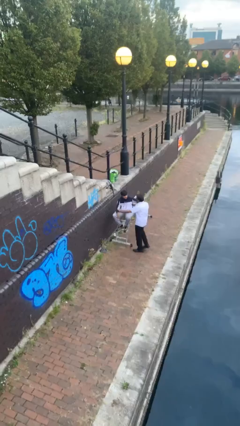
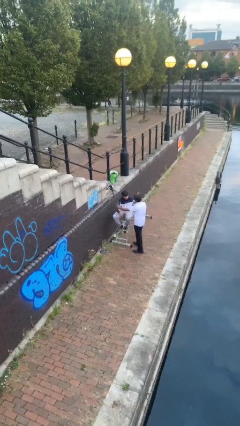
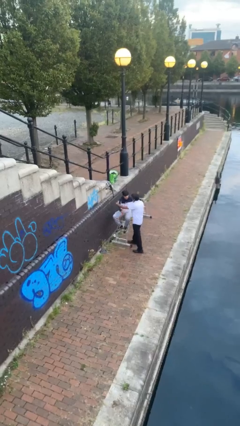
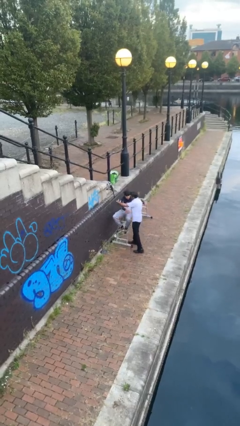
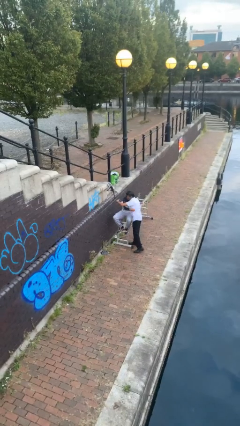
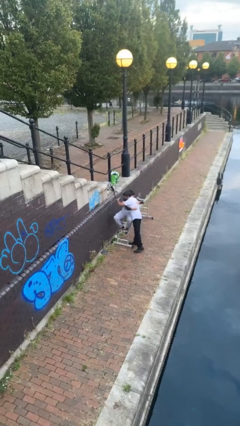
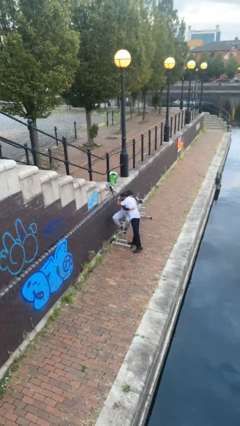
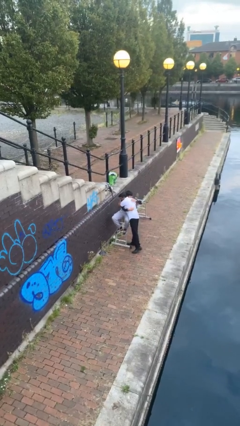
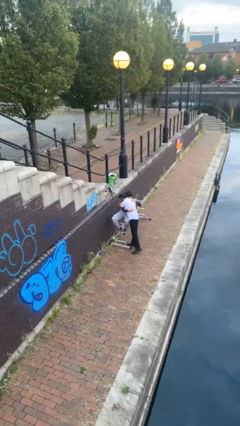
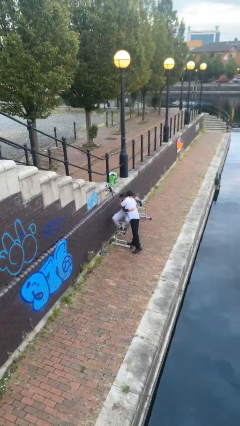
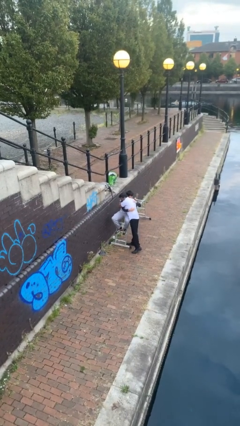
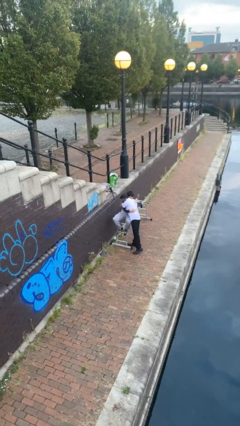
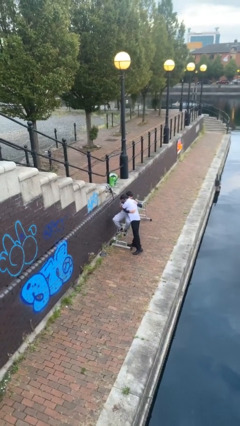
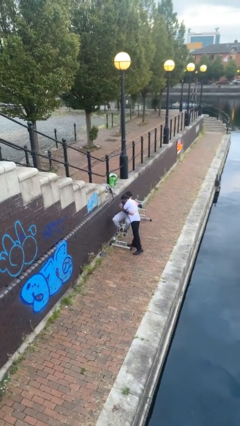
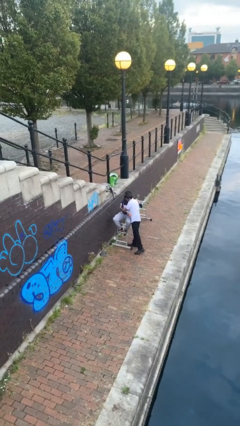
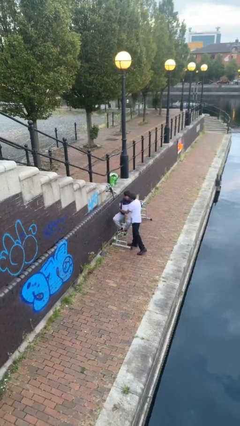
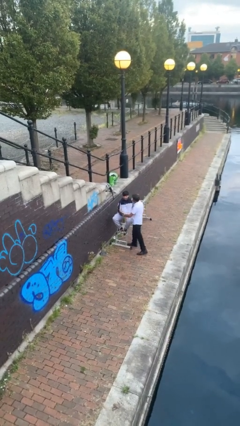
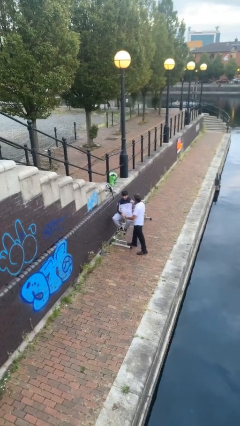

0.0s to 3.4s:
person embraces person

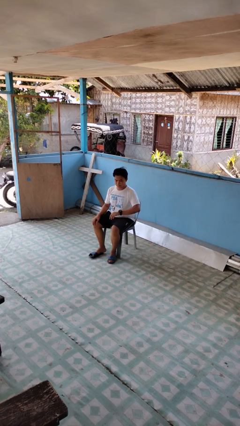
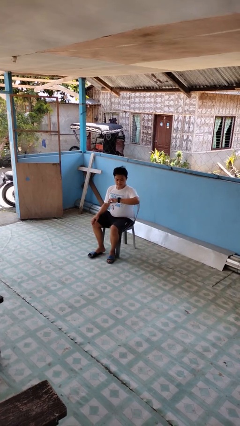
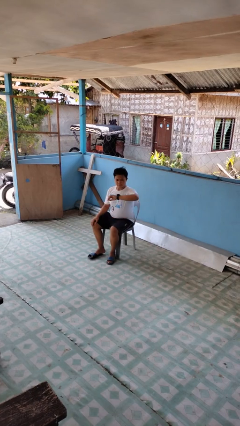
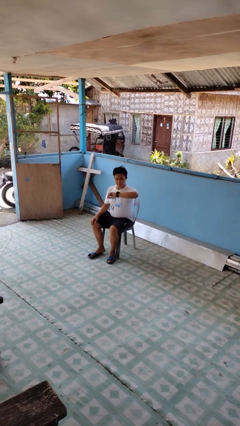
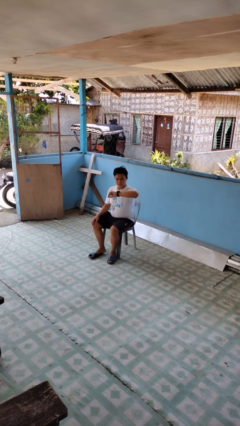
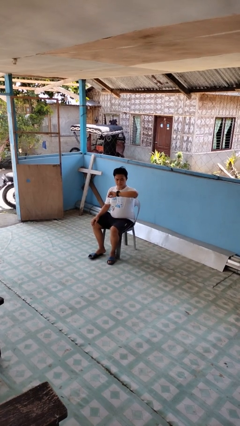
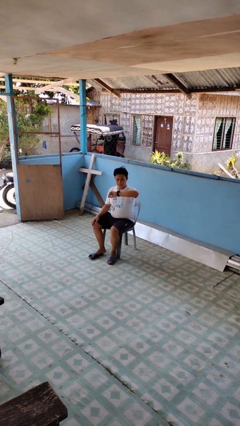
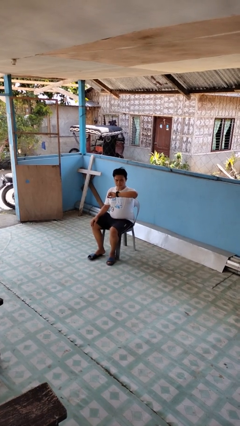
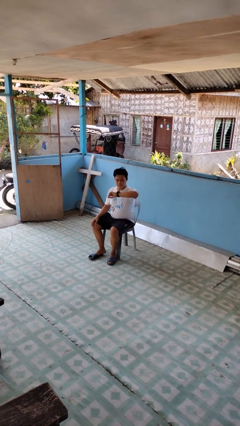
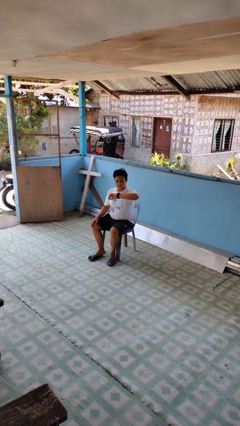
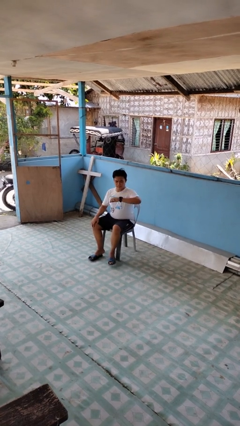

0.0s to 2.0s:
person looks at wristwatch

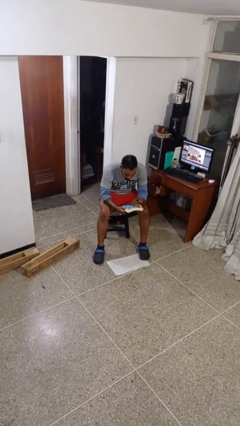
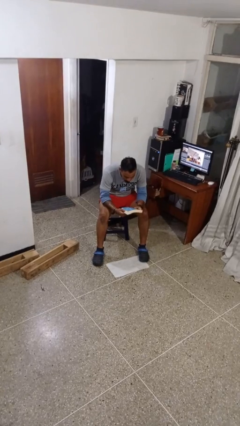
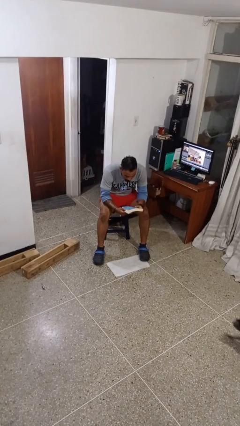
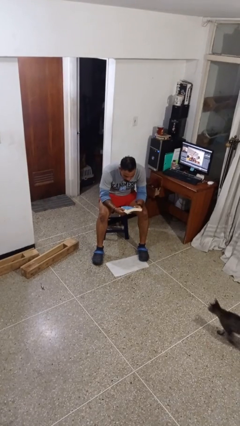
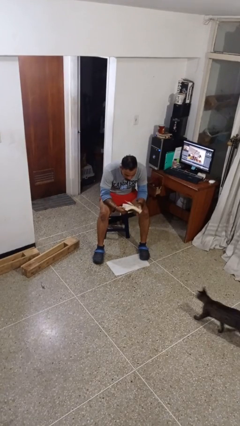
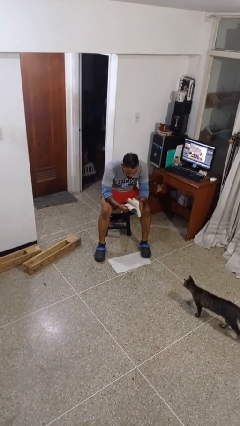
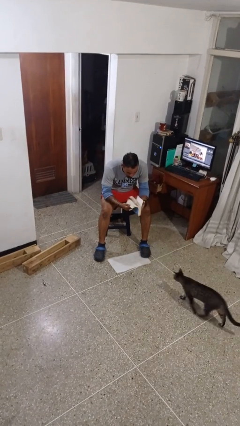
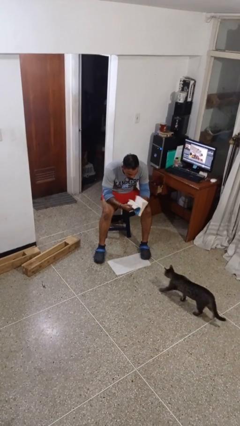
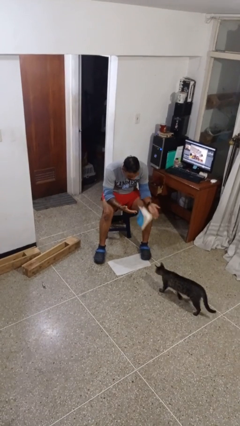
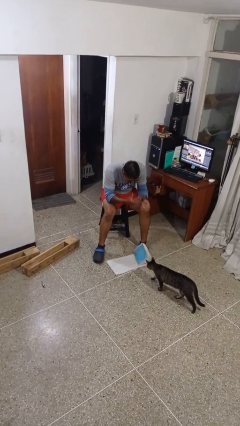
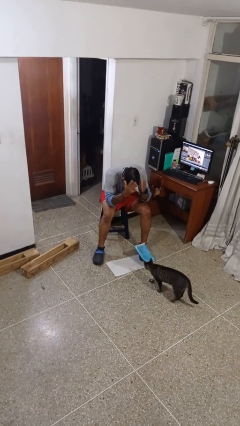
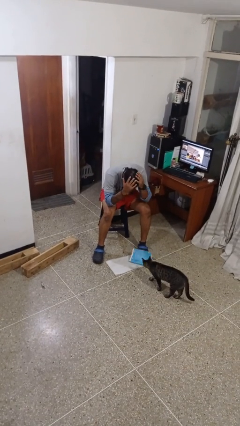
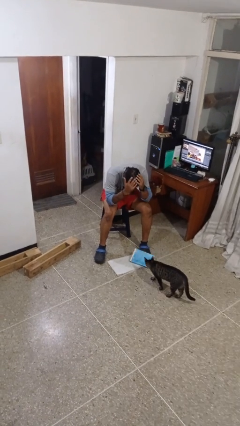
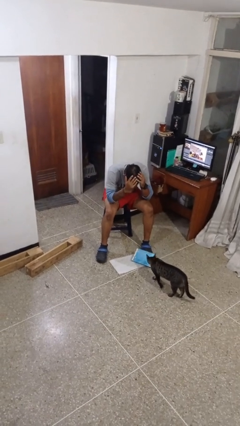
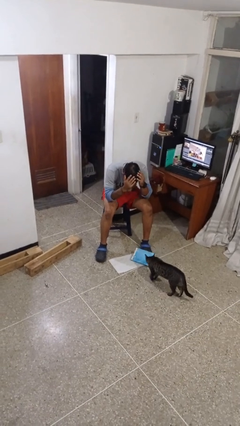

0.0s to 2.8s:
person drops object

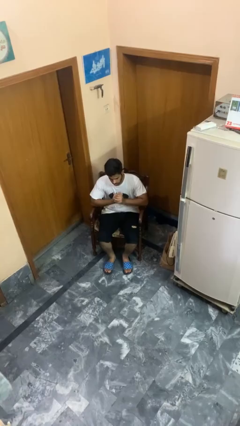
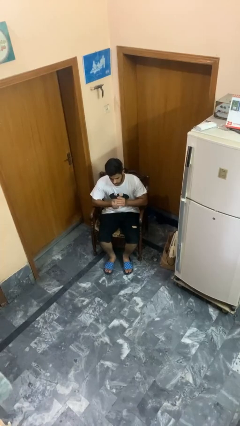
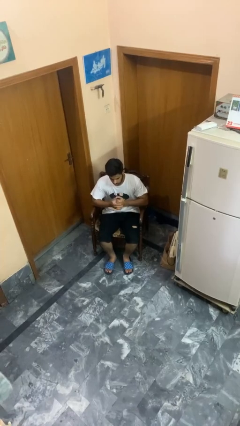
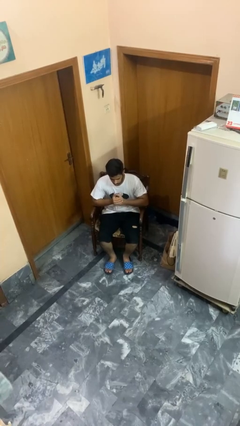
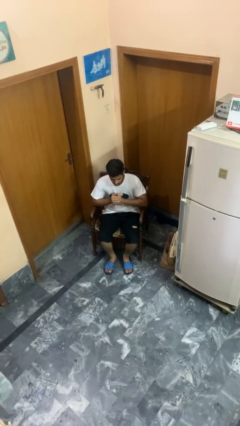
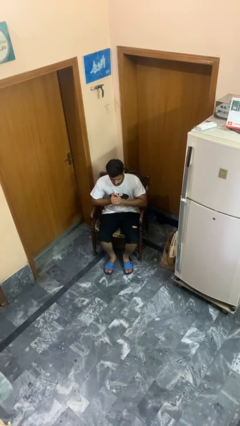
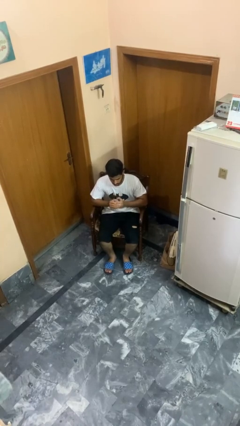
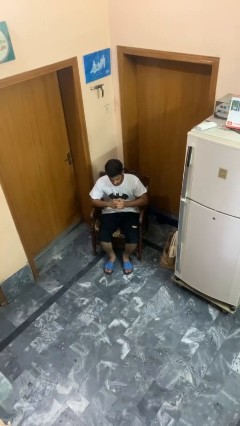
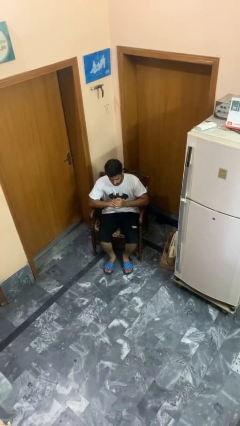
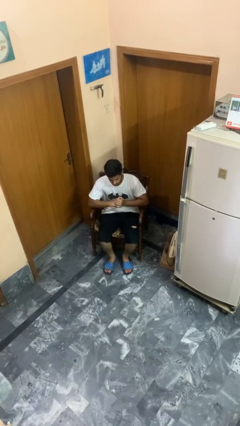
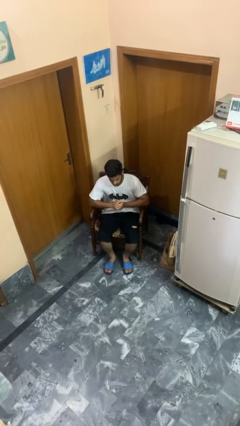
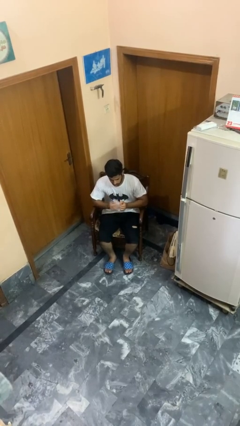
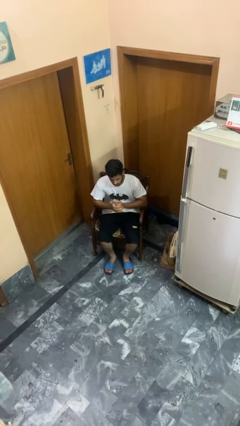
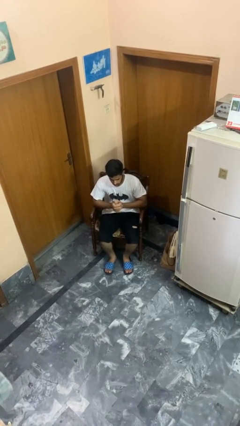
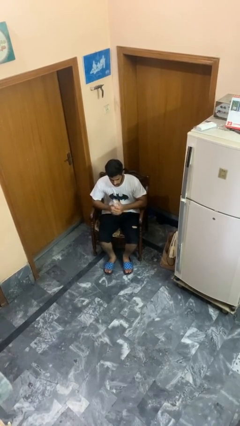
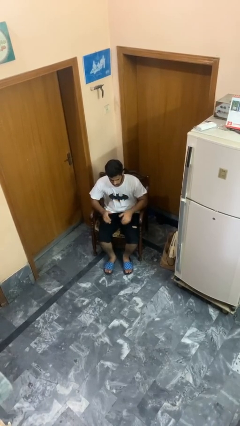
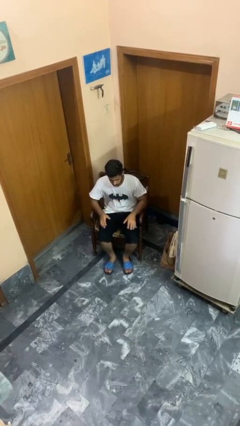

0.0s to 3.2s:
person cracks knuckles

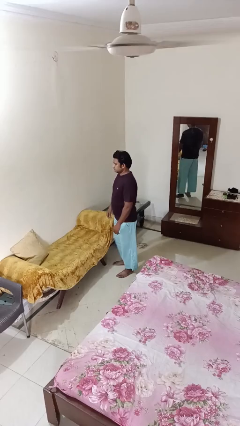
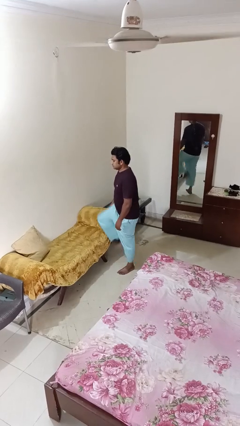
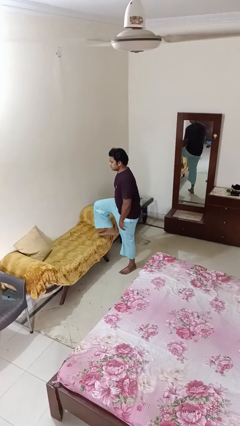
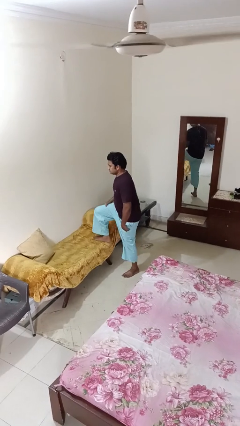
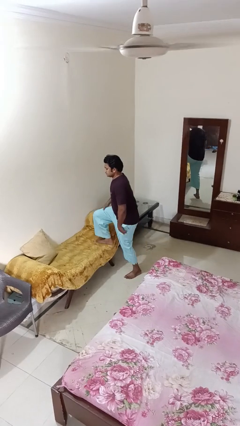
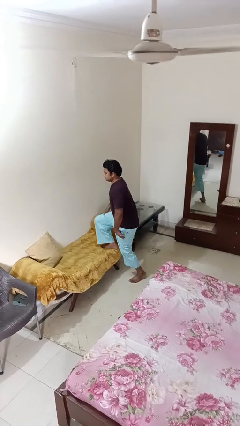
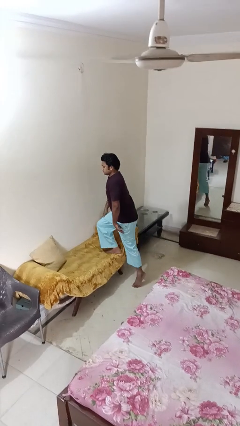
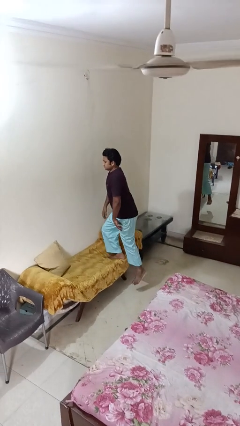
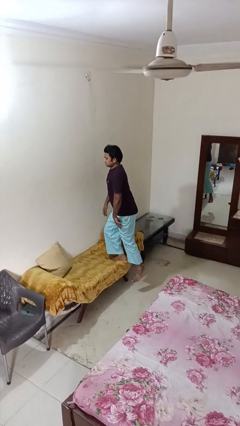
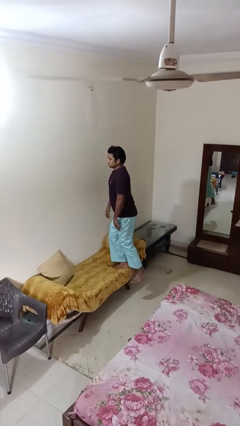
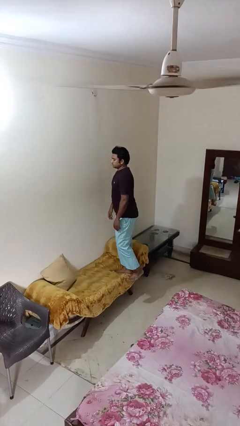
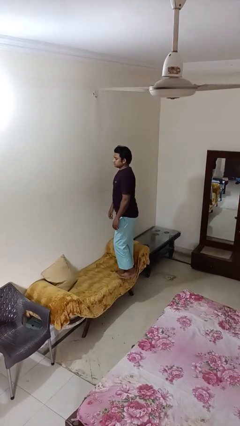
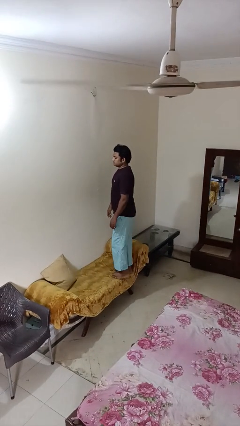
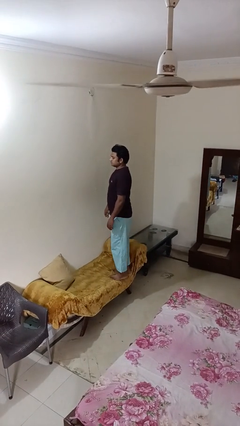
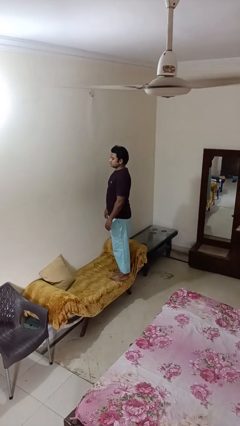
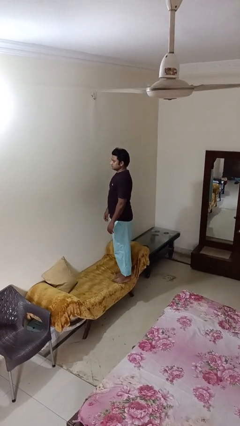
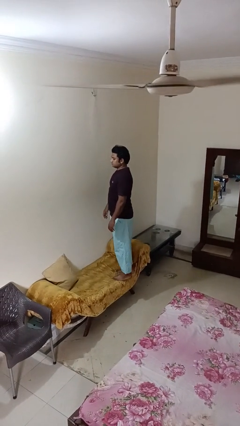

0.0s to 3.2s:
person climbs on couch

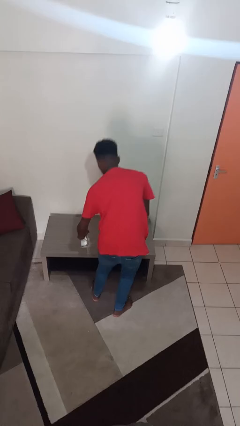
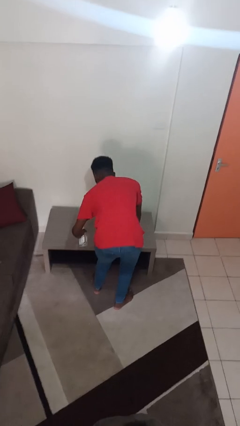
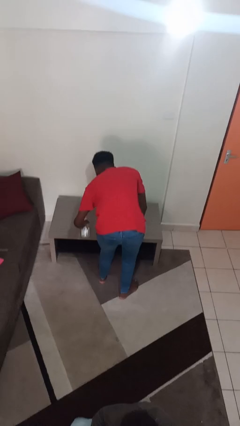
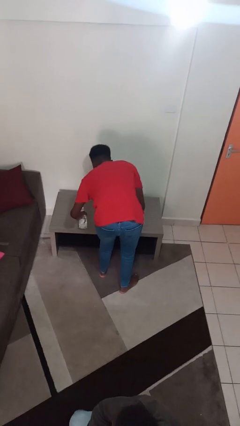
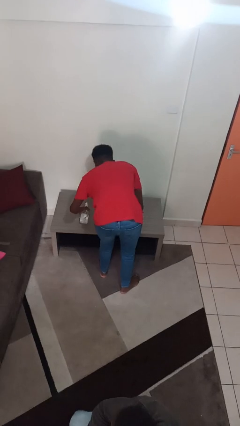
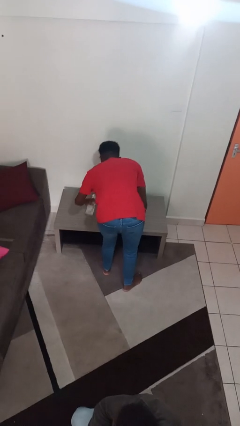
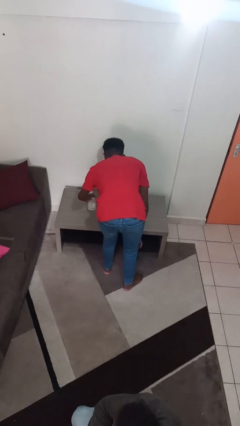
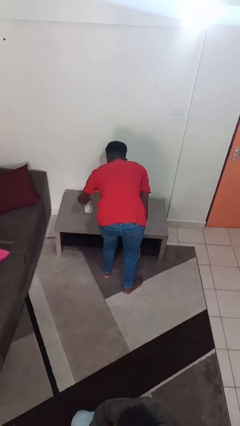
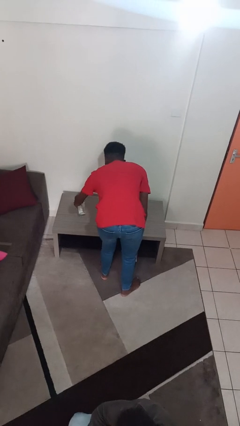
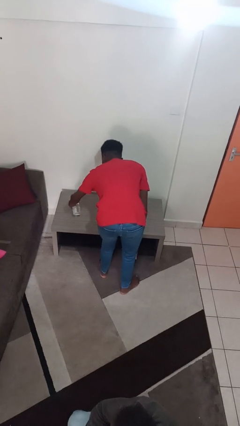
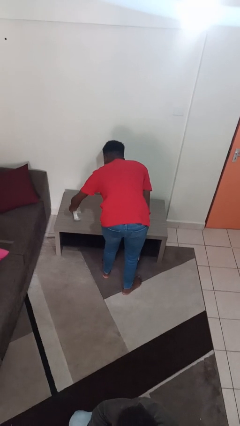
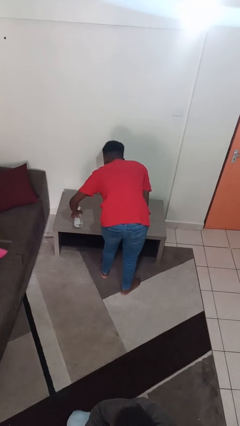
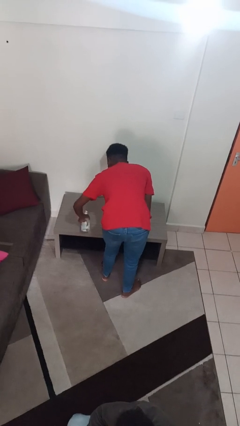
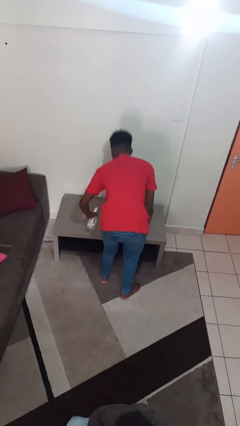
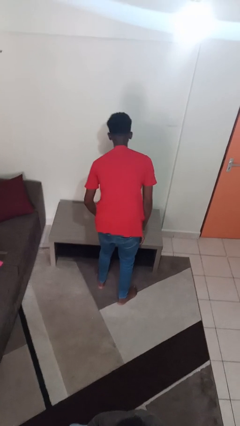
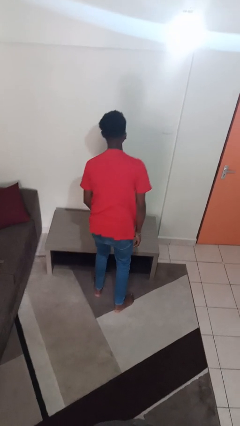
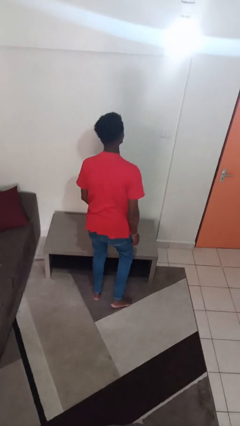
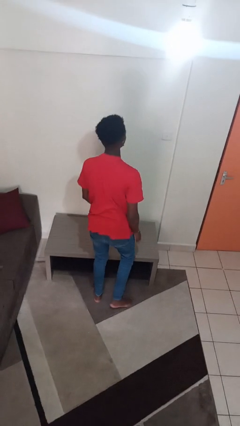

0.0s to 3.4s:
person sprays from bottle
